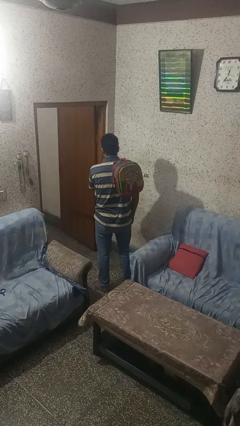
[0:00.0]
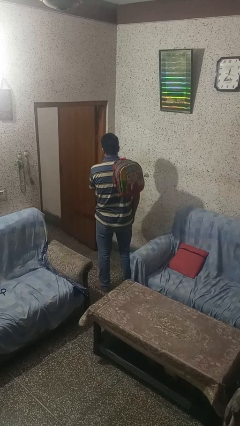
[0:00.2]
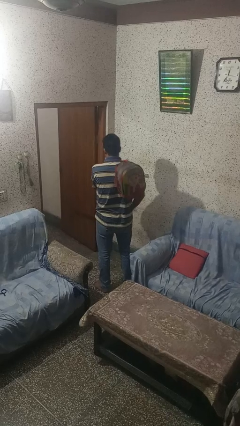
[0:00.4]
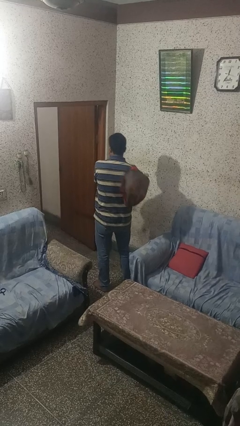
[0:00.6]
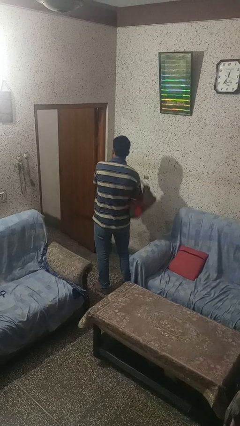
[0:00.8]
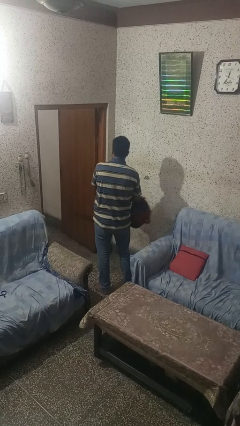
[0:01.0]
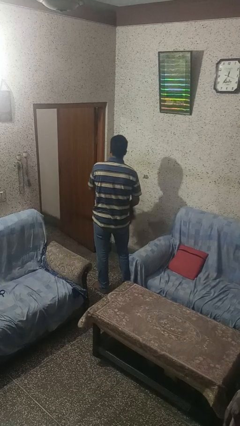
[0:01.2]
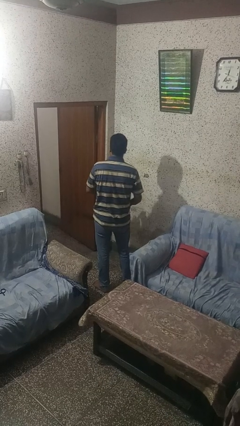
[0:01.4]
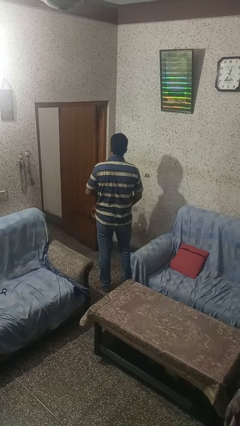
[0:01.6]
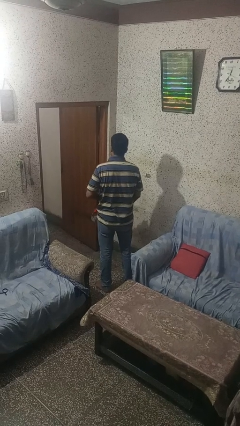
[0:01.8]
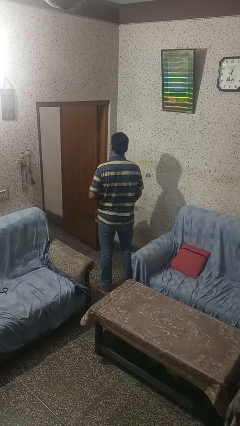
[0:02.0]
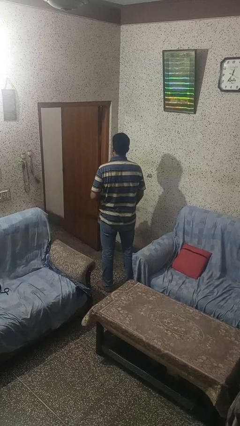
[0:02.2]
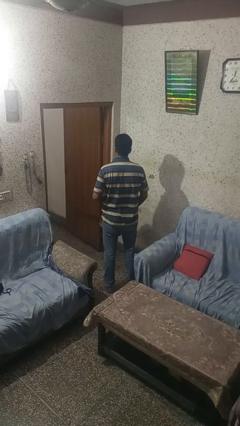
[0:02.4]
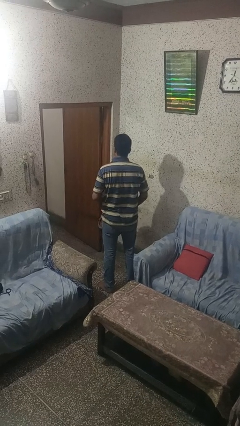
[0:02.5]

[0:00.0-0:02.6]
person takes off backpack

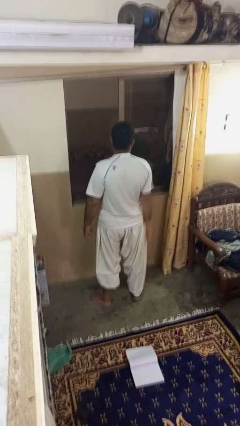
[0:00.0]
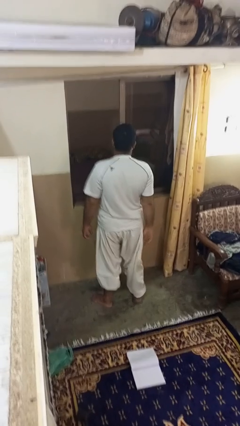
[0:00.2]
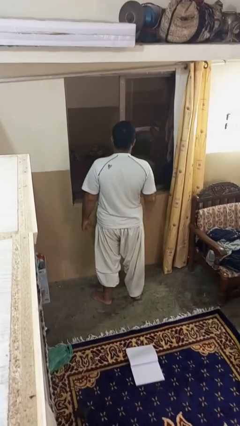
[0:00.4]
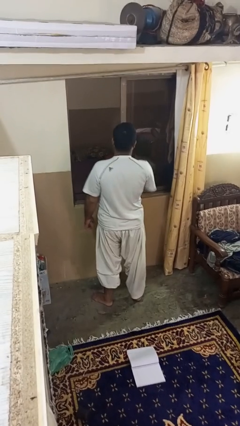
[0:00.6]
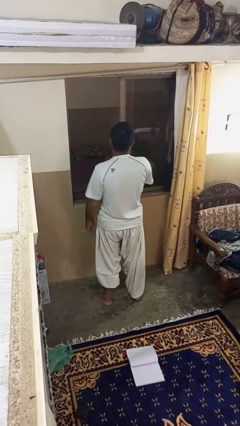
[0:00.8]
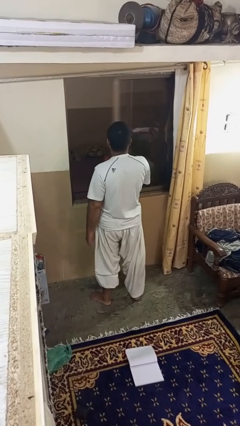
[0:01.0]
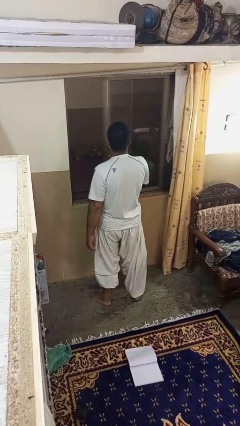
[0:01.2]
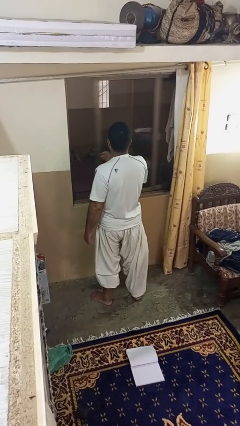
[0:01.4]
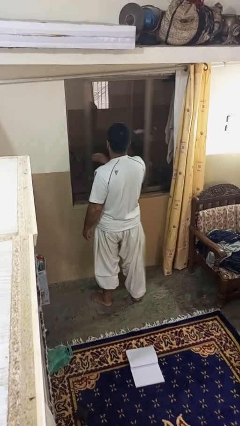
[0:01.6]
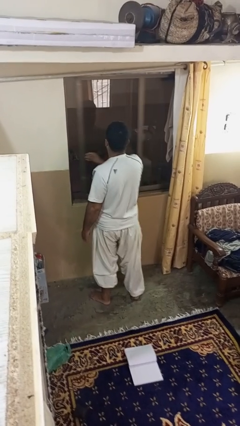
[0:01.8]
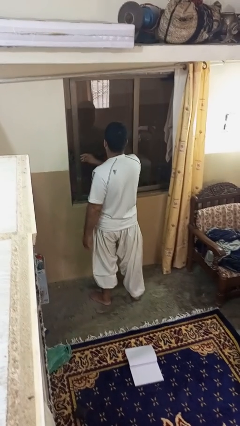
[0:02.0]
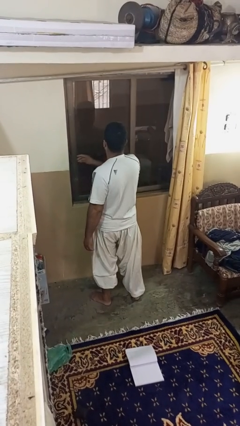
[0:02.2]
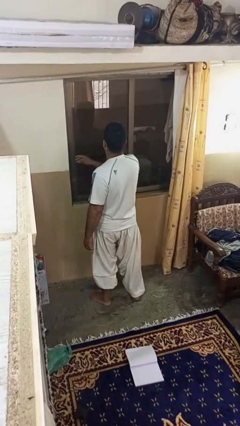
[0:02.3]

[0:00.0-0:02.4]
person closes home window

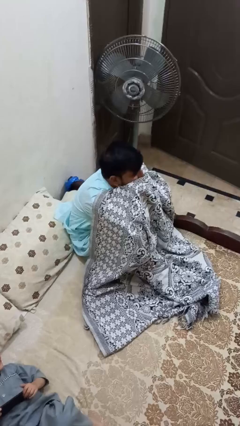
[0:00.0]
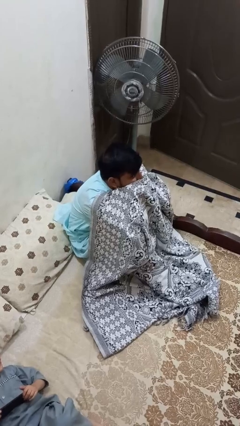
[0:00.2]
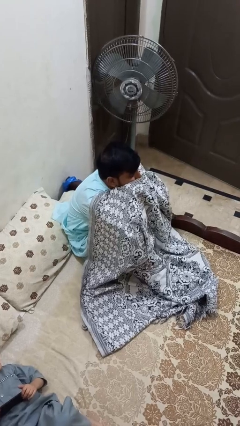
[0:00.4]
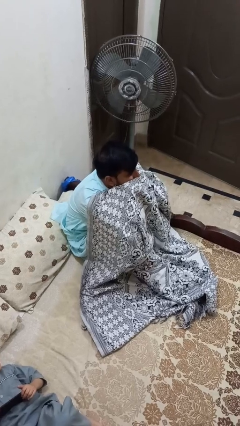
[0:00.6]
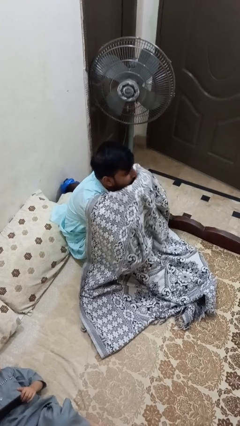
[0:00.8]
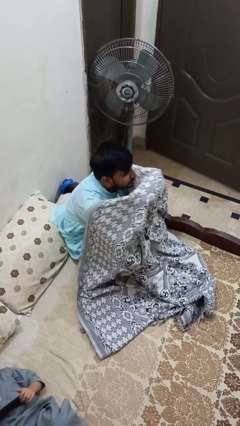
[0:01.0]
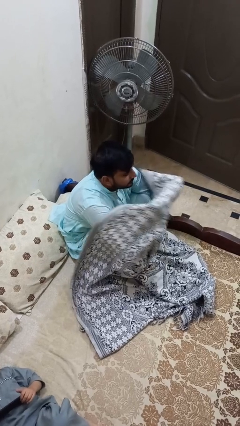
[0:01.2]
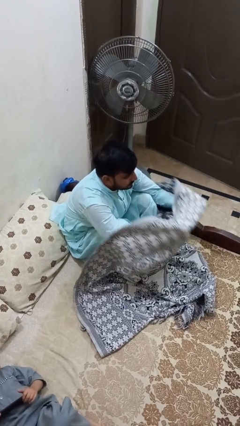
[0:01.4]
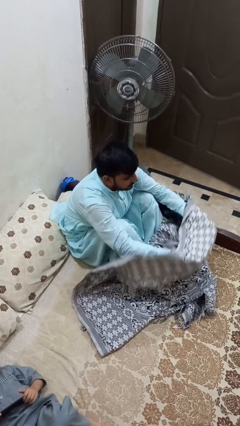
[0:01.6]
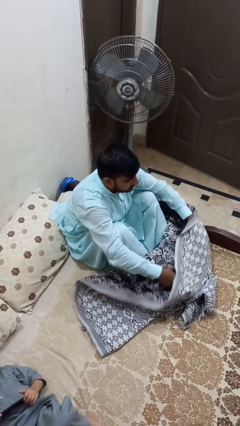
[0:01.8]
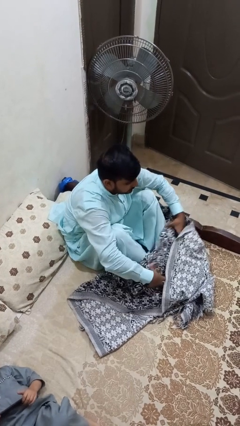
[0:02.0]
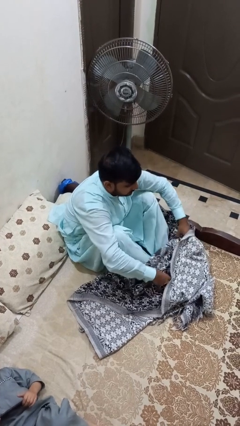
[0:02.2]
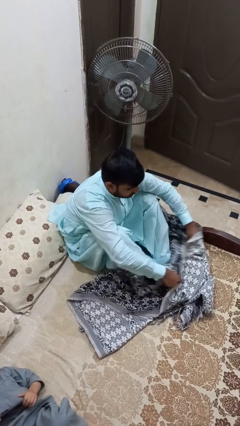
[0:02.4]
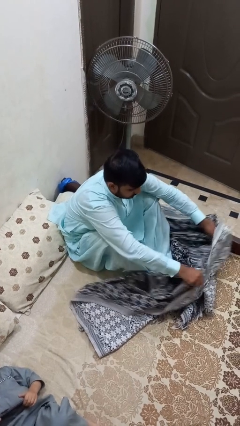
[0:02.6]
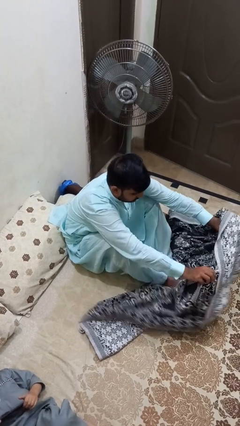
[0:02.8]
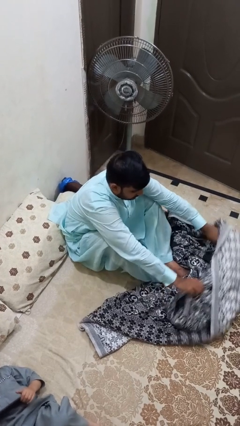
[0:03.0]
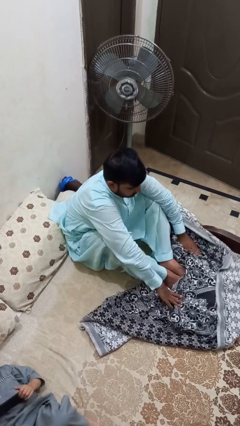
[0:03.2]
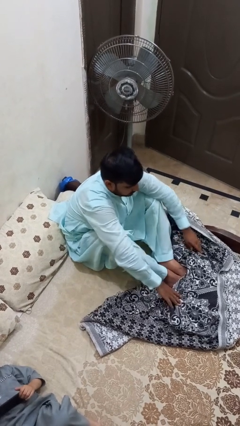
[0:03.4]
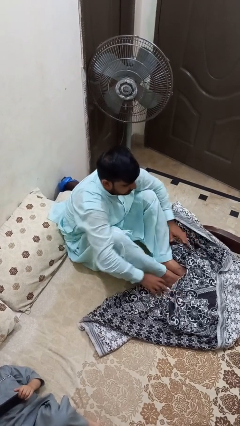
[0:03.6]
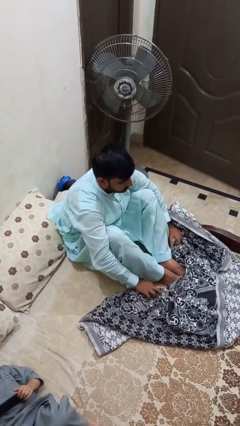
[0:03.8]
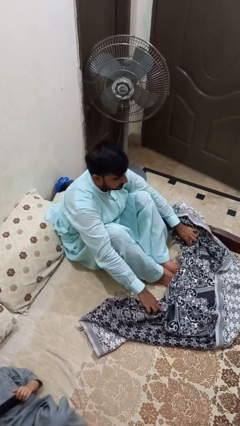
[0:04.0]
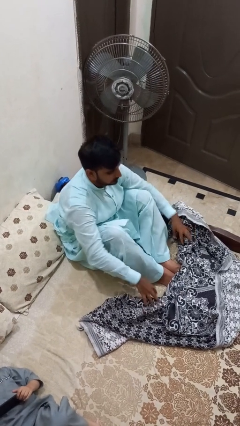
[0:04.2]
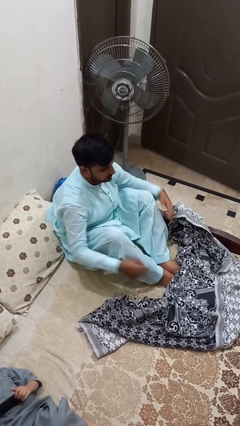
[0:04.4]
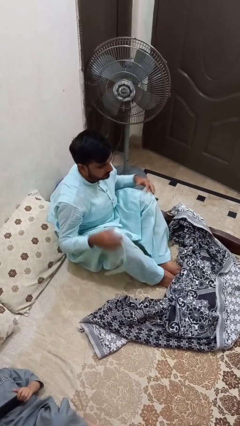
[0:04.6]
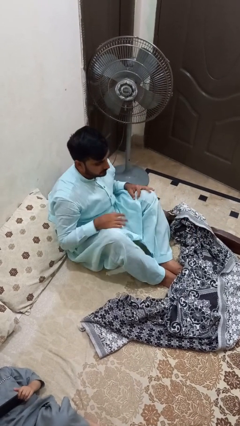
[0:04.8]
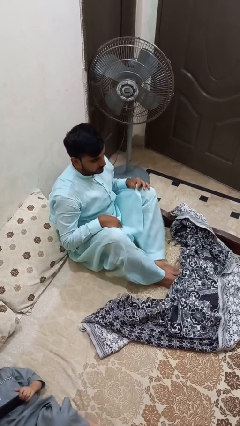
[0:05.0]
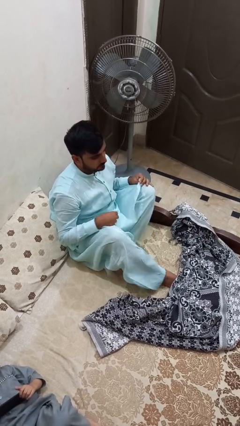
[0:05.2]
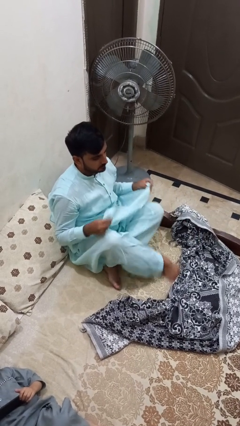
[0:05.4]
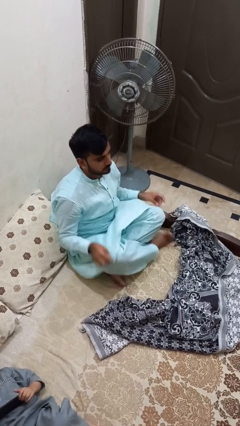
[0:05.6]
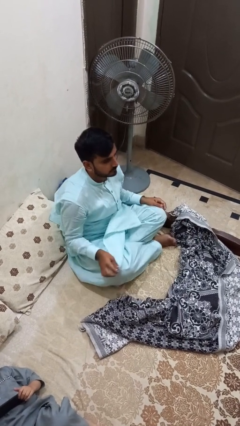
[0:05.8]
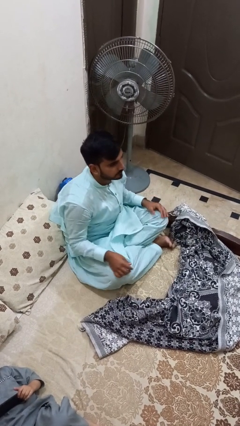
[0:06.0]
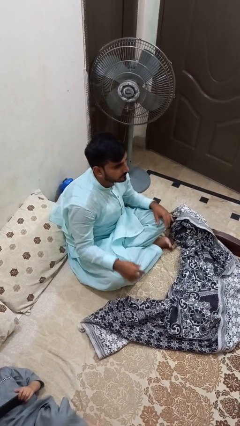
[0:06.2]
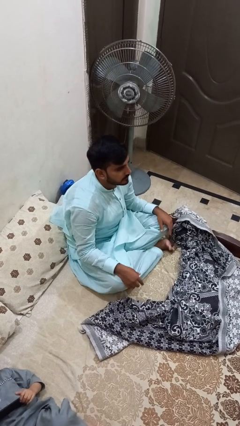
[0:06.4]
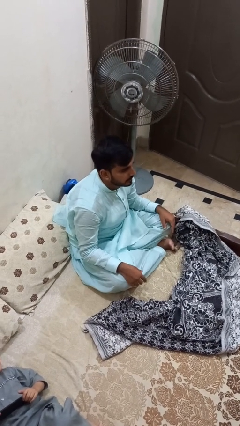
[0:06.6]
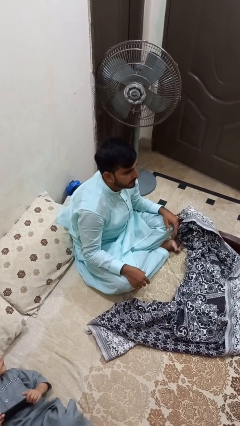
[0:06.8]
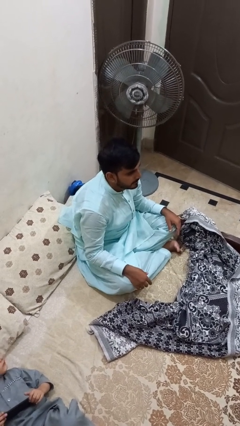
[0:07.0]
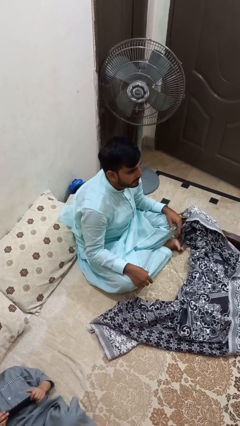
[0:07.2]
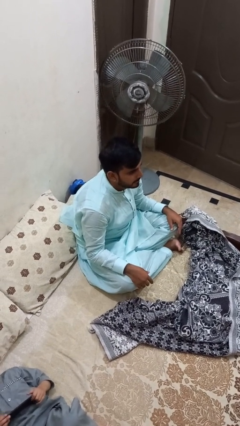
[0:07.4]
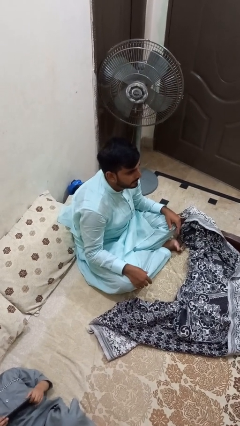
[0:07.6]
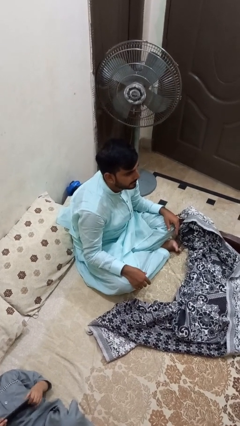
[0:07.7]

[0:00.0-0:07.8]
person uncovers with blanket

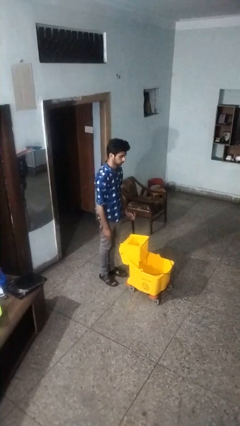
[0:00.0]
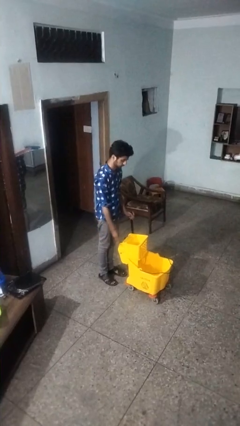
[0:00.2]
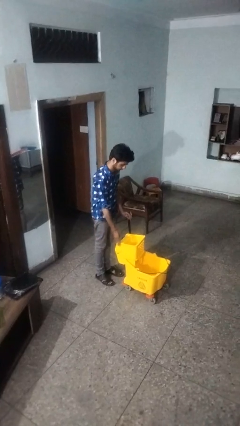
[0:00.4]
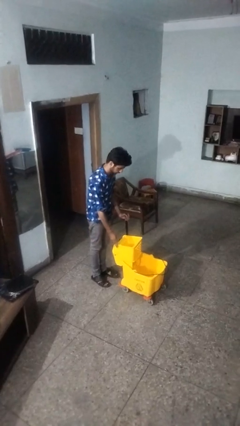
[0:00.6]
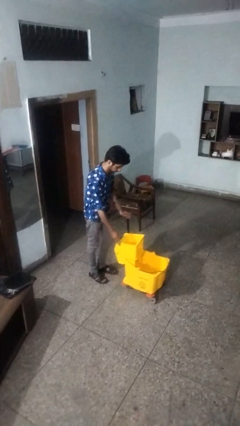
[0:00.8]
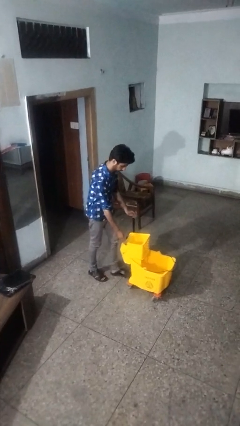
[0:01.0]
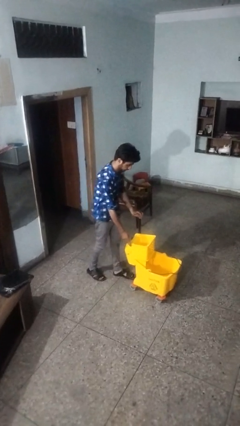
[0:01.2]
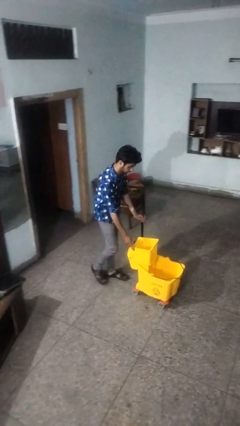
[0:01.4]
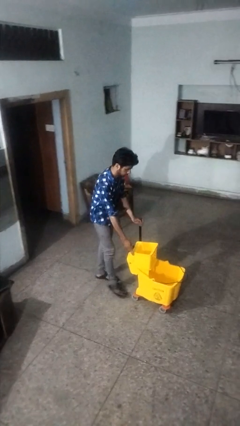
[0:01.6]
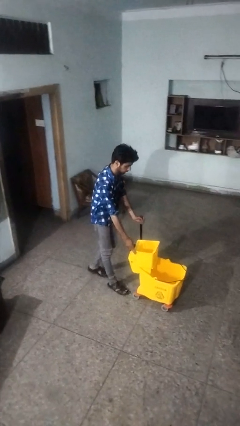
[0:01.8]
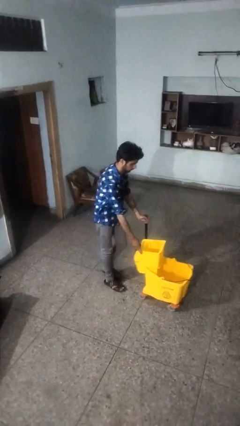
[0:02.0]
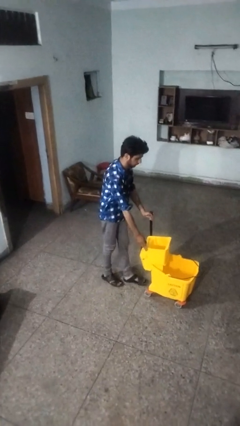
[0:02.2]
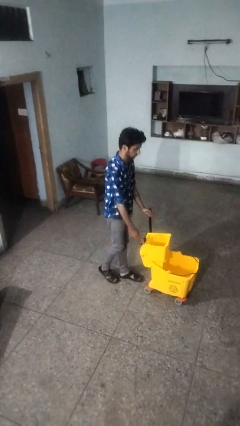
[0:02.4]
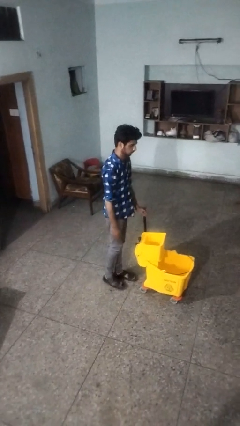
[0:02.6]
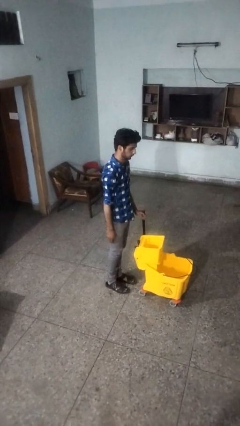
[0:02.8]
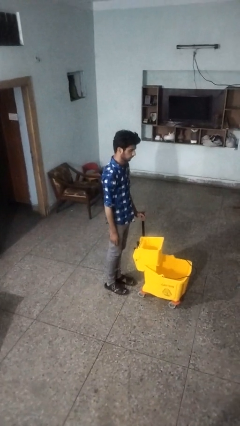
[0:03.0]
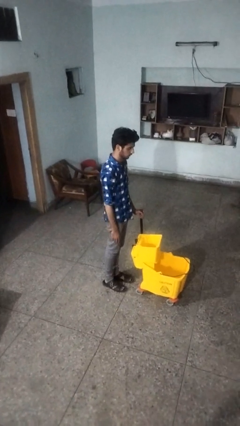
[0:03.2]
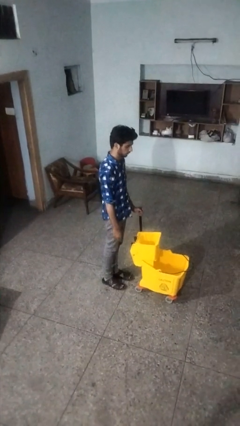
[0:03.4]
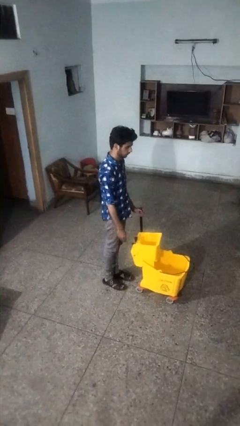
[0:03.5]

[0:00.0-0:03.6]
person pushes wheeled cart

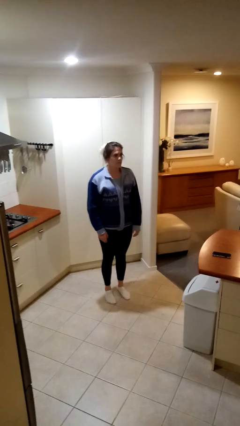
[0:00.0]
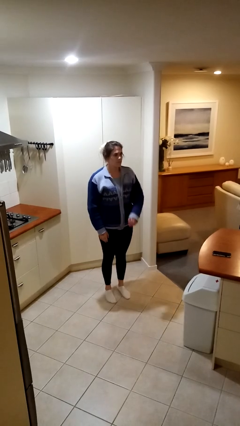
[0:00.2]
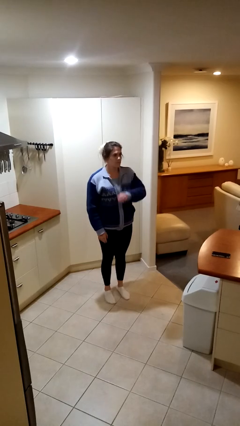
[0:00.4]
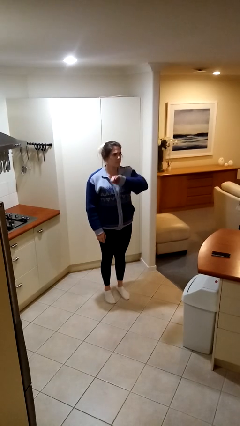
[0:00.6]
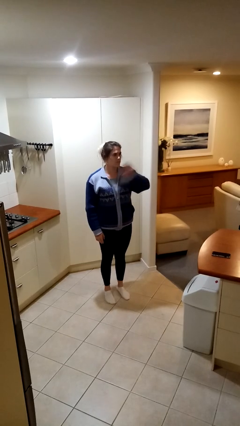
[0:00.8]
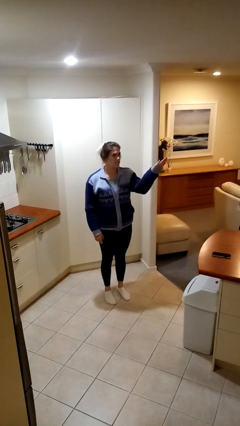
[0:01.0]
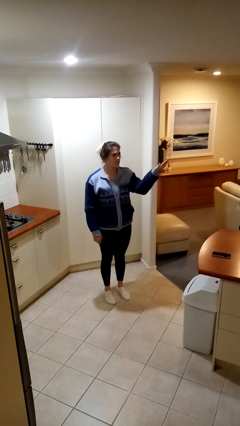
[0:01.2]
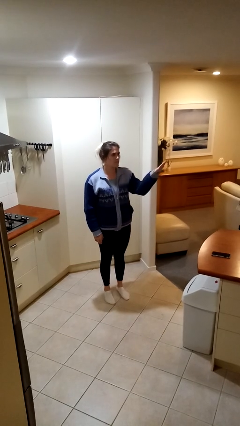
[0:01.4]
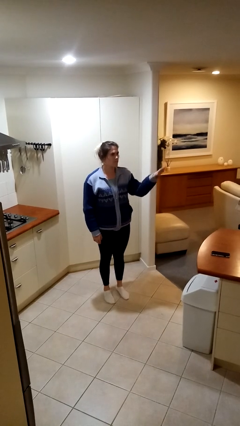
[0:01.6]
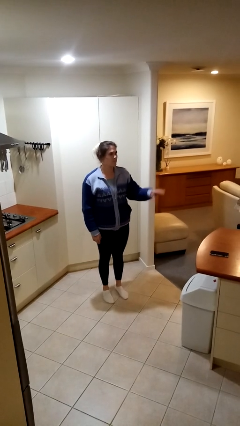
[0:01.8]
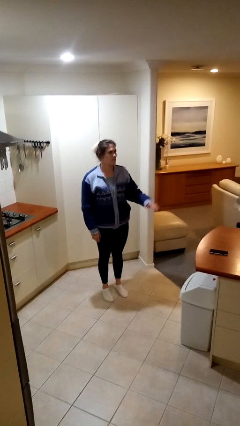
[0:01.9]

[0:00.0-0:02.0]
person gestures swipe left
